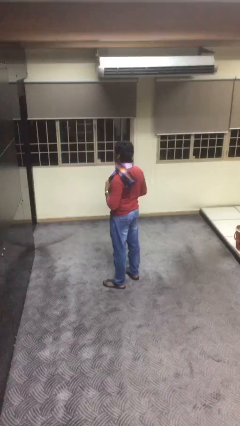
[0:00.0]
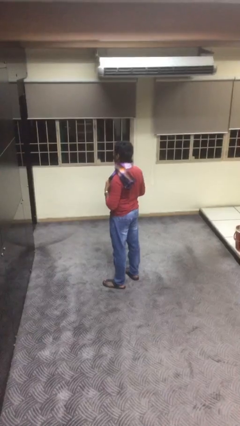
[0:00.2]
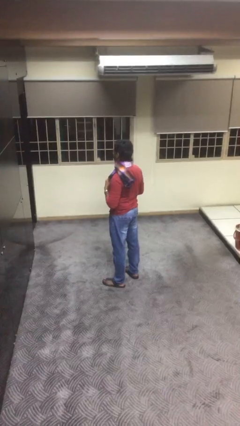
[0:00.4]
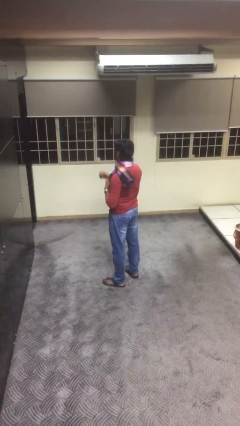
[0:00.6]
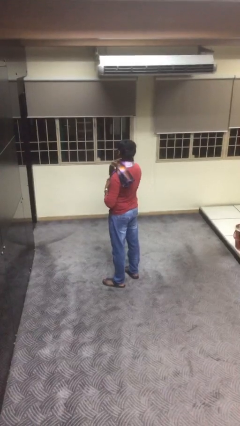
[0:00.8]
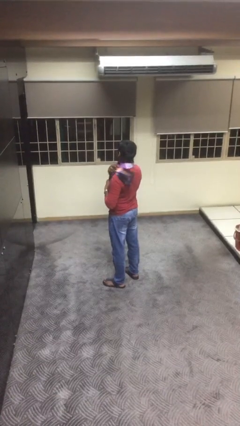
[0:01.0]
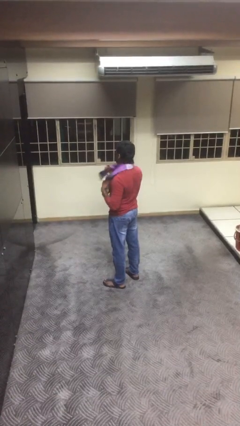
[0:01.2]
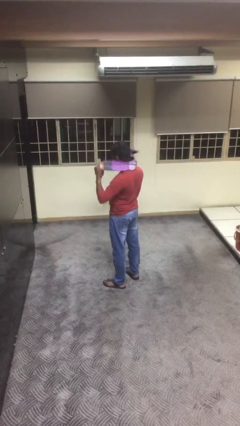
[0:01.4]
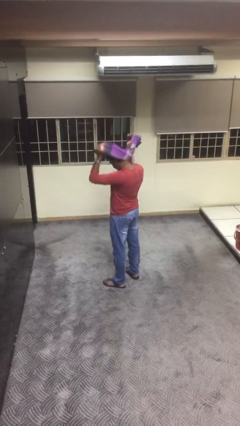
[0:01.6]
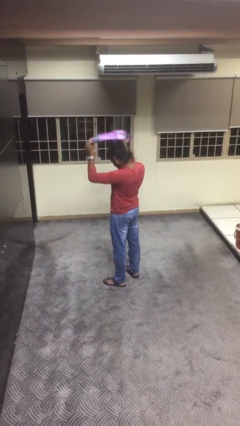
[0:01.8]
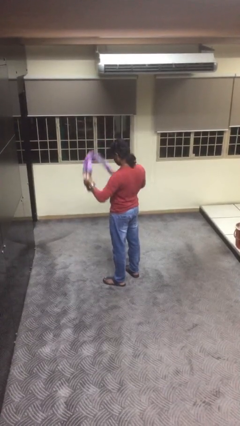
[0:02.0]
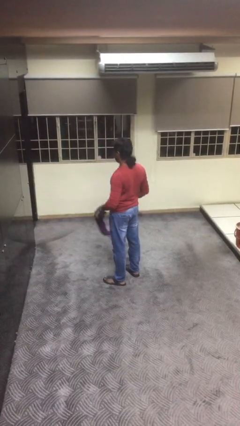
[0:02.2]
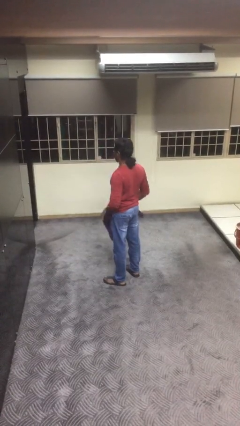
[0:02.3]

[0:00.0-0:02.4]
person takes off scarf

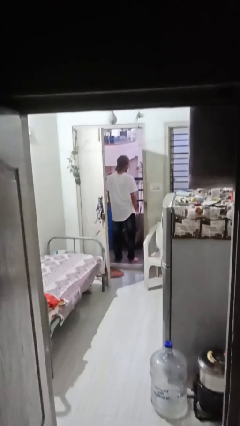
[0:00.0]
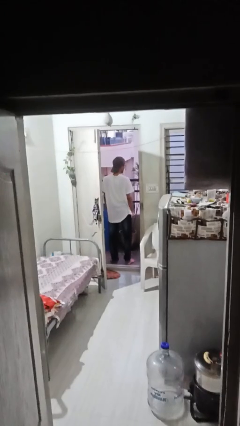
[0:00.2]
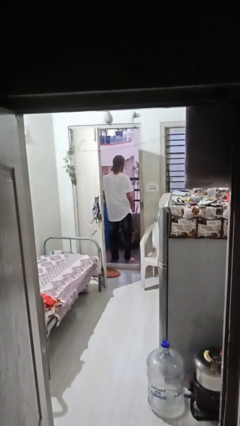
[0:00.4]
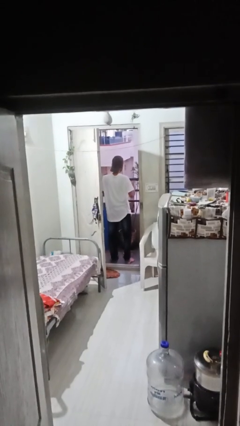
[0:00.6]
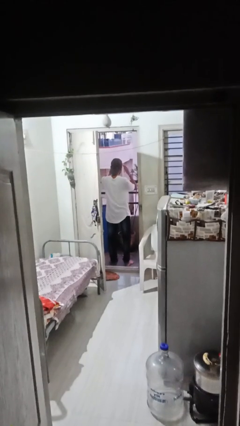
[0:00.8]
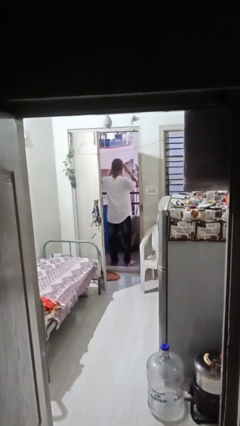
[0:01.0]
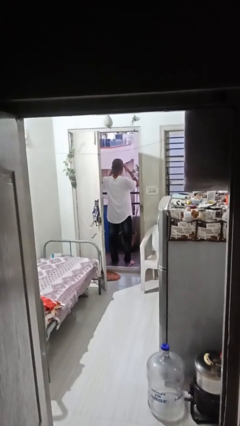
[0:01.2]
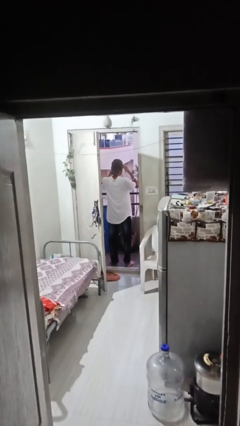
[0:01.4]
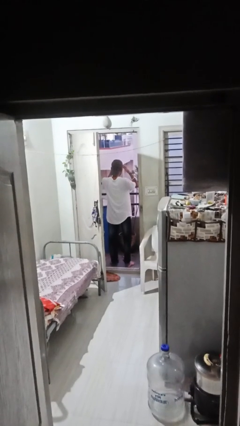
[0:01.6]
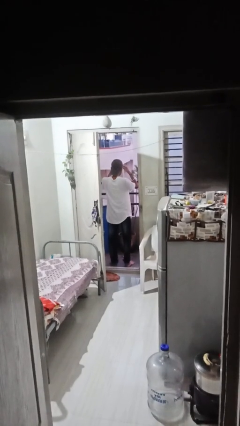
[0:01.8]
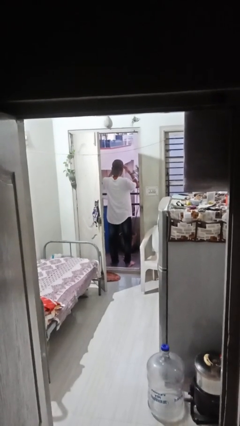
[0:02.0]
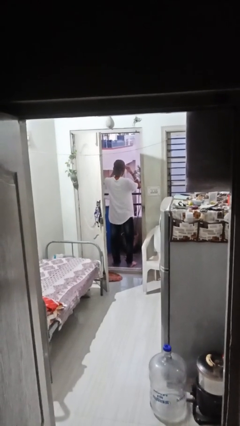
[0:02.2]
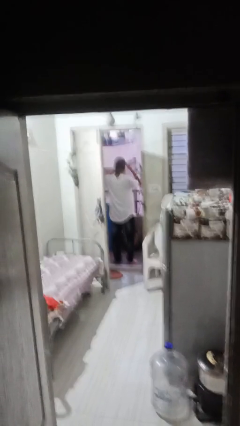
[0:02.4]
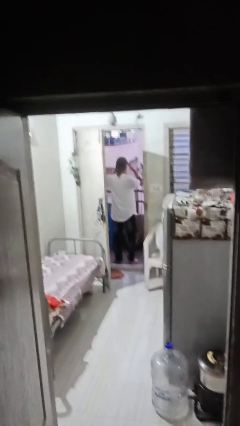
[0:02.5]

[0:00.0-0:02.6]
person shades eyes

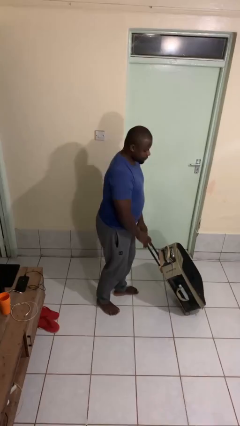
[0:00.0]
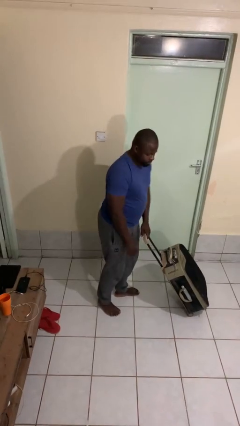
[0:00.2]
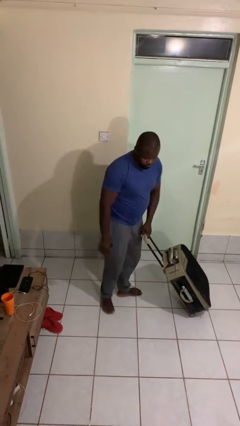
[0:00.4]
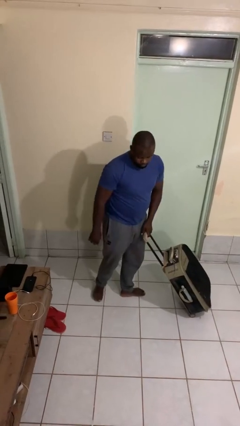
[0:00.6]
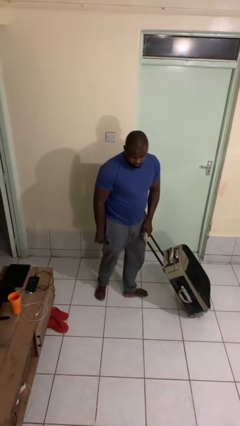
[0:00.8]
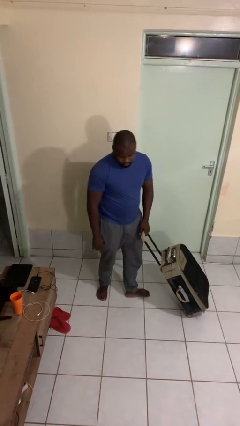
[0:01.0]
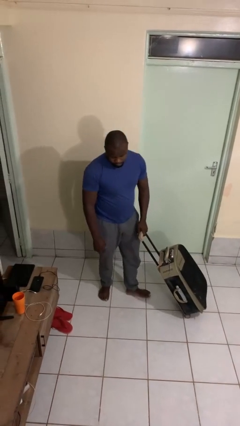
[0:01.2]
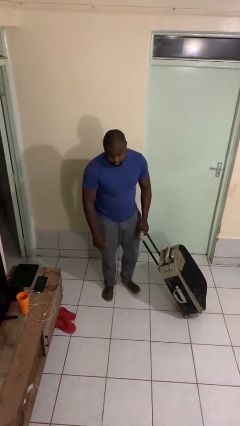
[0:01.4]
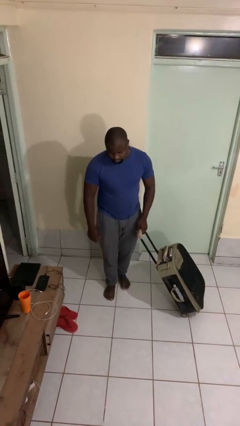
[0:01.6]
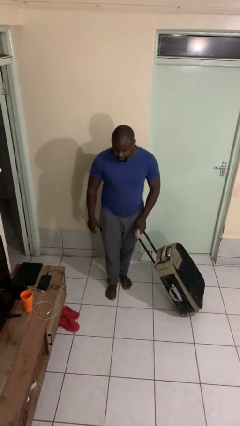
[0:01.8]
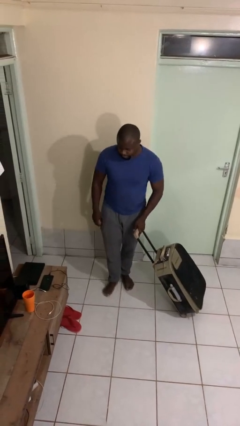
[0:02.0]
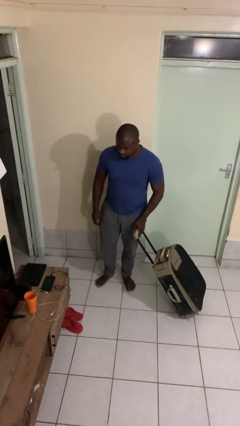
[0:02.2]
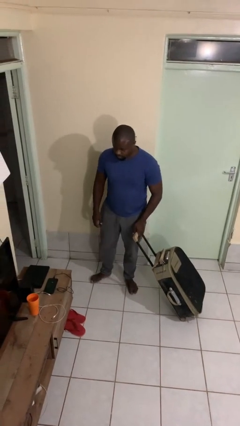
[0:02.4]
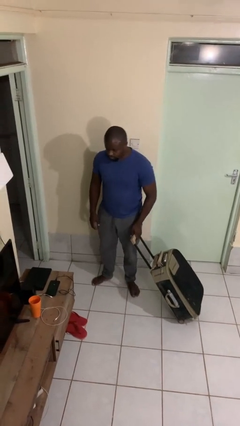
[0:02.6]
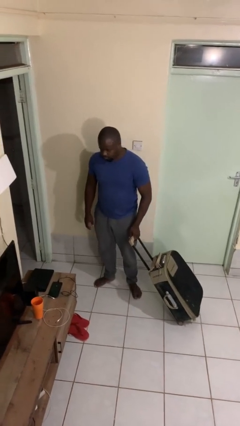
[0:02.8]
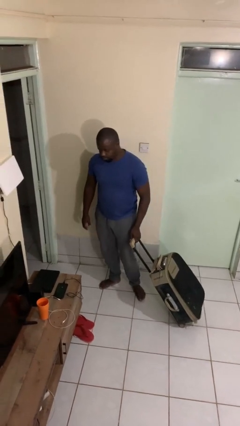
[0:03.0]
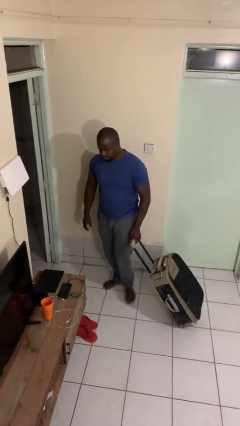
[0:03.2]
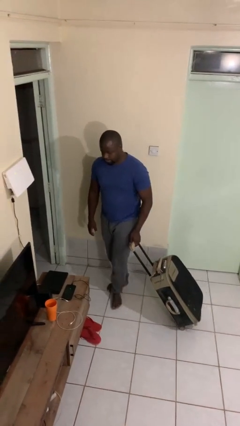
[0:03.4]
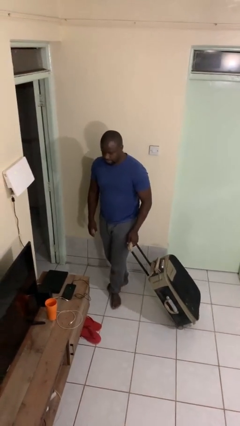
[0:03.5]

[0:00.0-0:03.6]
person pulls wheeled cart

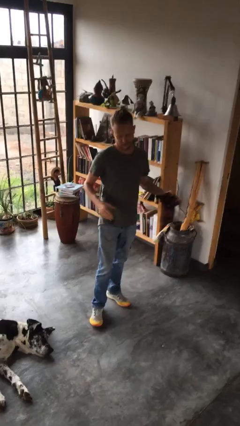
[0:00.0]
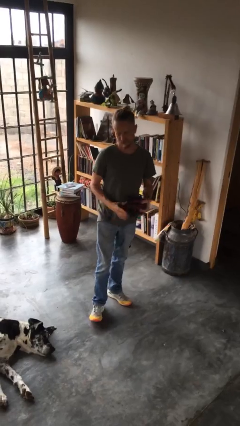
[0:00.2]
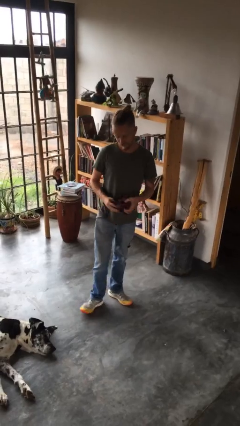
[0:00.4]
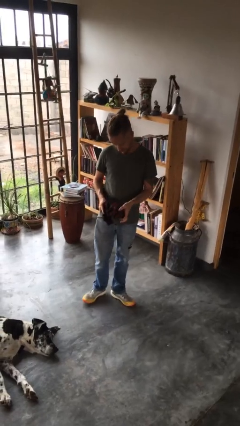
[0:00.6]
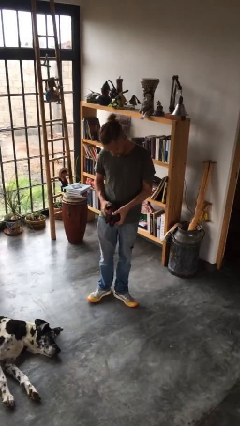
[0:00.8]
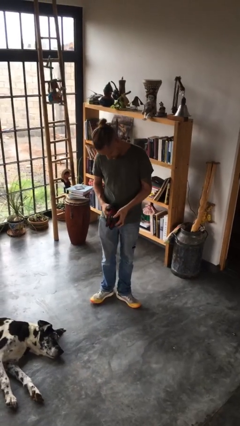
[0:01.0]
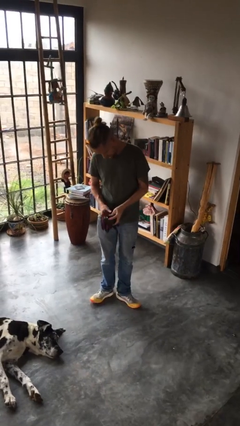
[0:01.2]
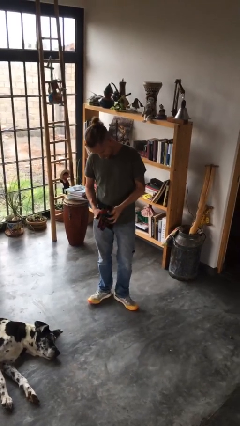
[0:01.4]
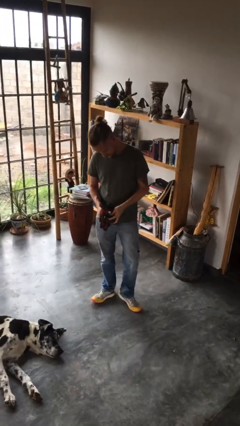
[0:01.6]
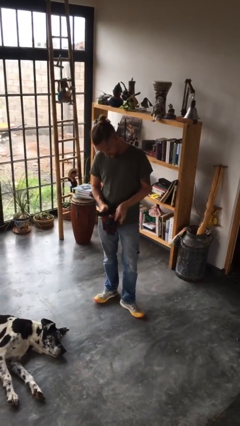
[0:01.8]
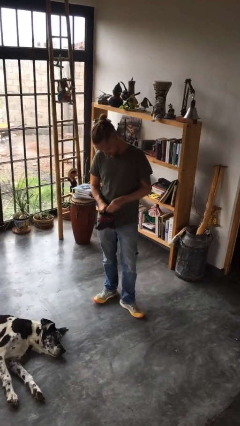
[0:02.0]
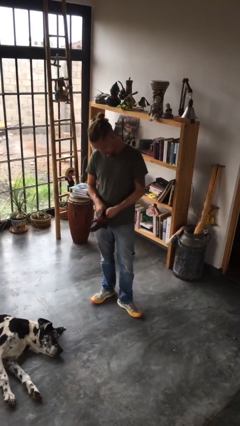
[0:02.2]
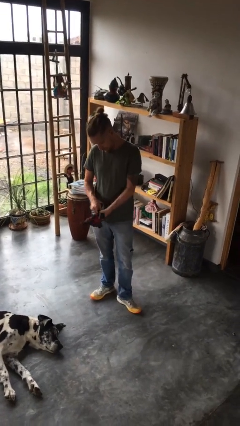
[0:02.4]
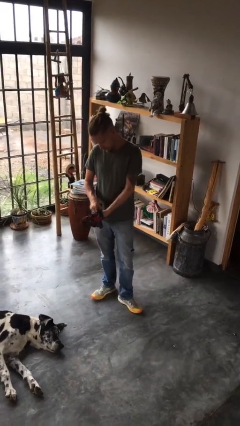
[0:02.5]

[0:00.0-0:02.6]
person puts on gloves

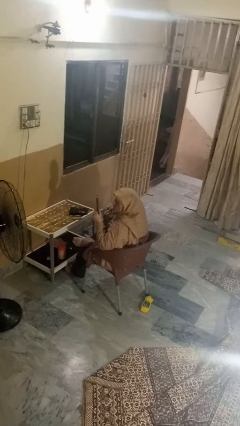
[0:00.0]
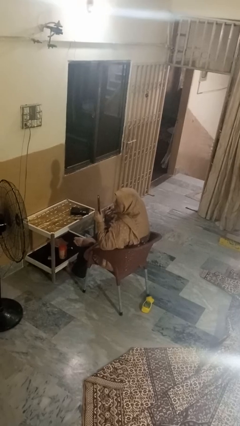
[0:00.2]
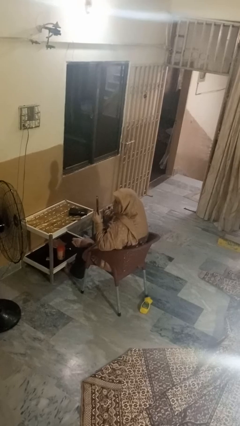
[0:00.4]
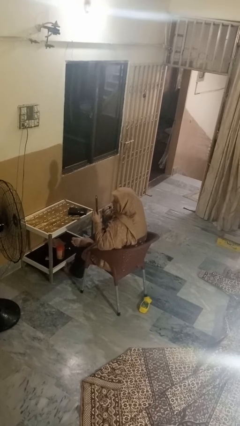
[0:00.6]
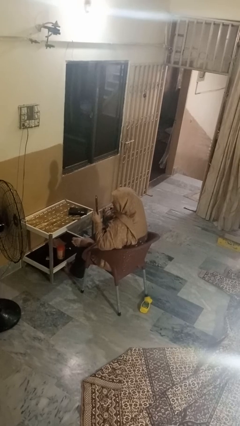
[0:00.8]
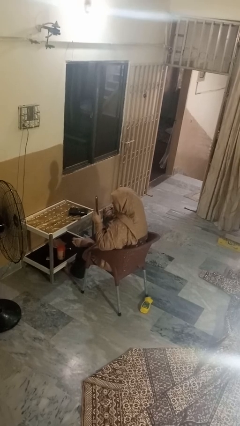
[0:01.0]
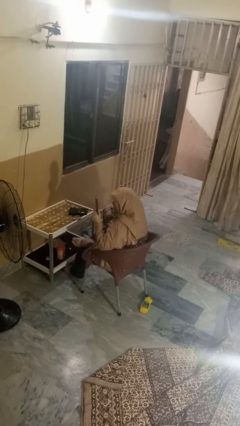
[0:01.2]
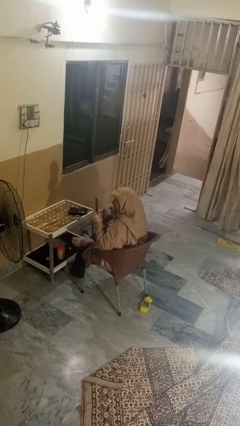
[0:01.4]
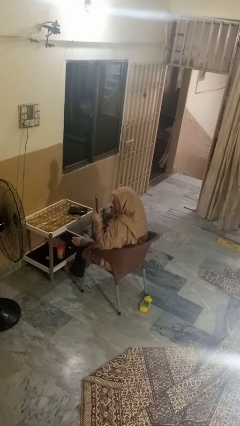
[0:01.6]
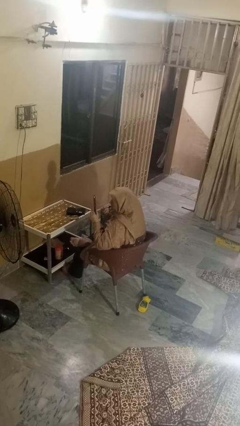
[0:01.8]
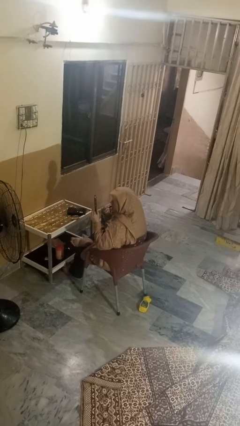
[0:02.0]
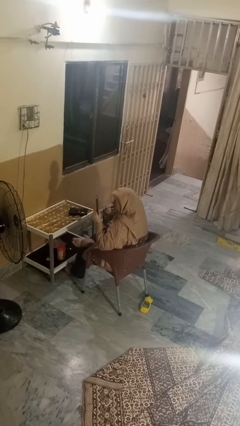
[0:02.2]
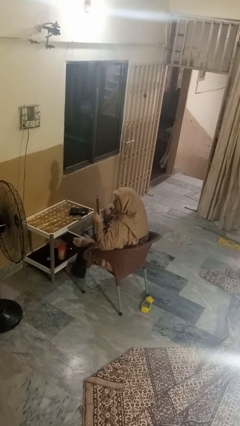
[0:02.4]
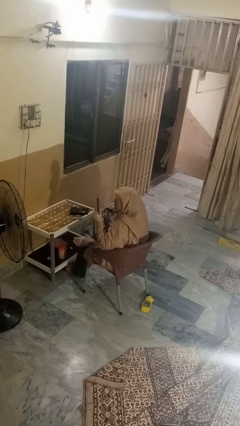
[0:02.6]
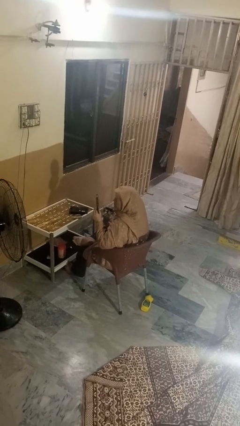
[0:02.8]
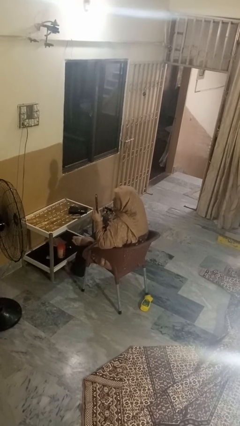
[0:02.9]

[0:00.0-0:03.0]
person applies lip makeup

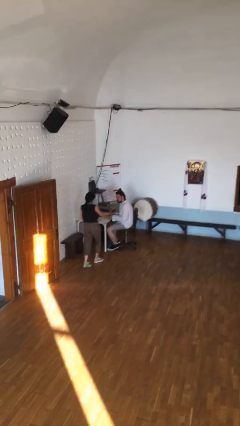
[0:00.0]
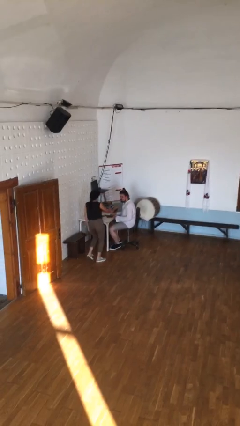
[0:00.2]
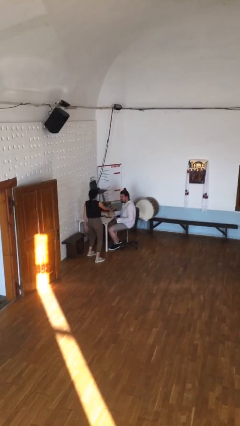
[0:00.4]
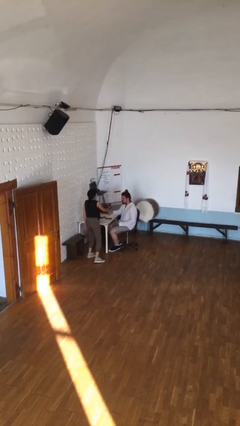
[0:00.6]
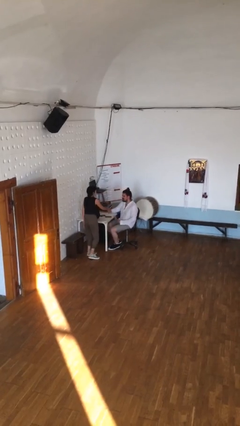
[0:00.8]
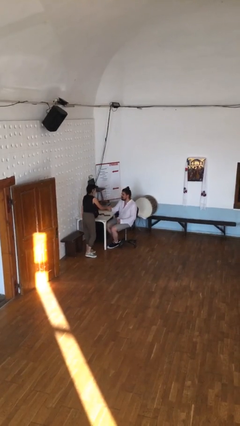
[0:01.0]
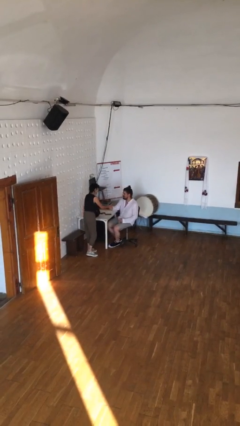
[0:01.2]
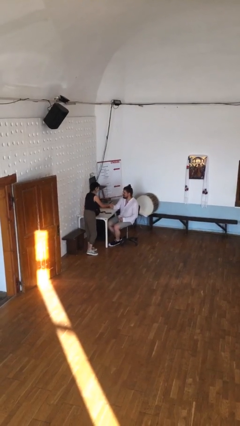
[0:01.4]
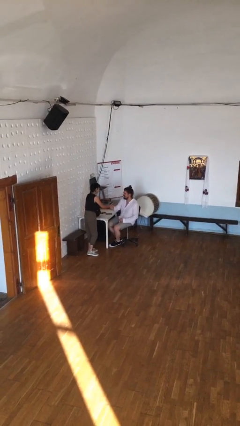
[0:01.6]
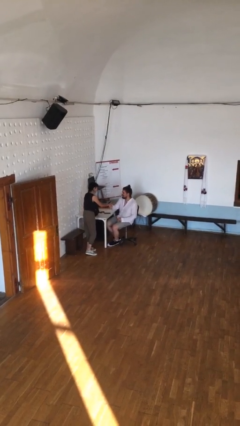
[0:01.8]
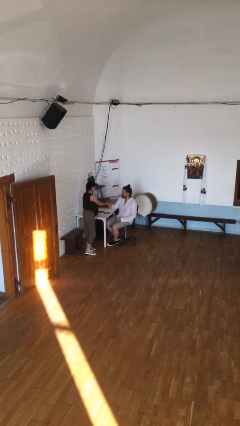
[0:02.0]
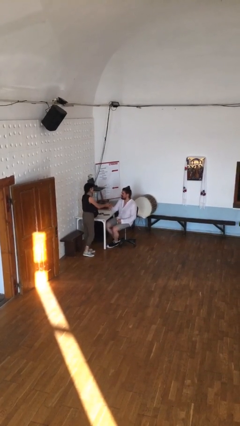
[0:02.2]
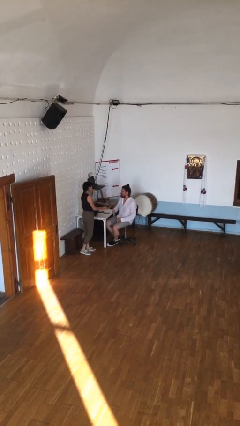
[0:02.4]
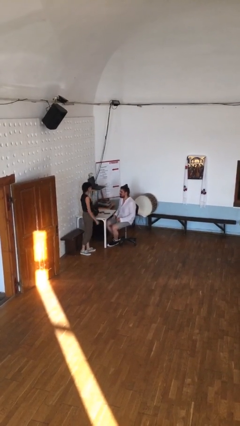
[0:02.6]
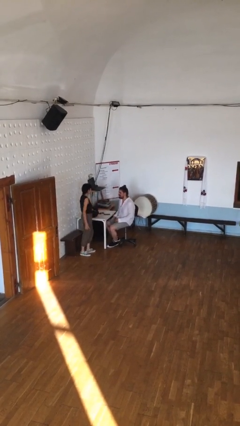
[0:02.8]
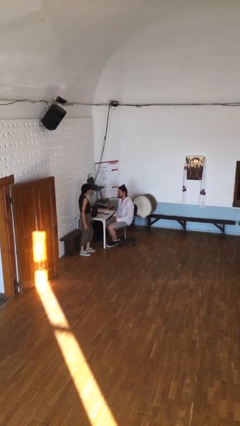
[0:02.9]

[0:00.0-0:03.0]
person shakes hand

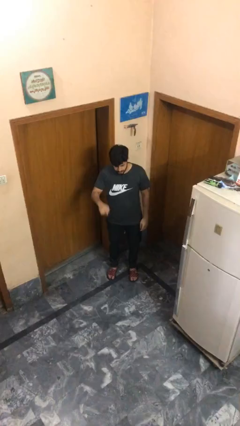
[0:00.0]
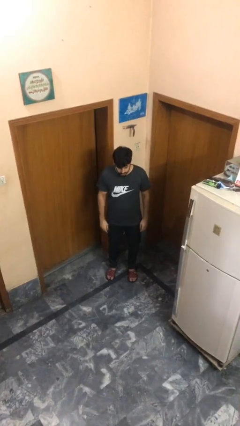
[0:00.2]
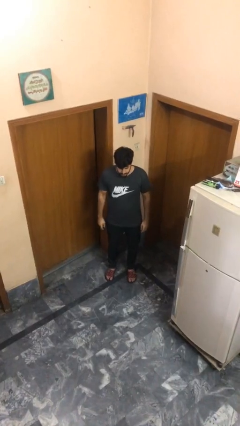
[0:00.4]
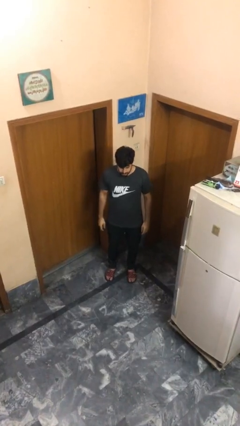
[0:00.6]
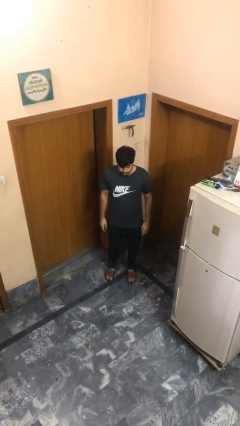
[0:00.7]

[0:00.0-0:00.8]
person gestures lower hand
